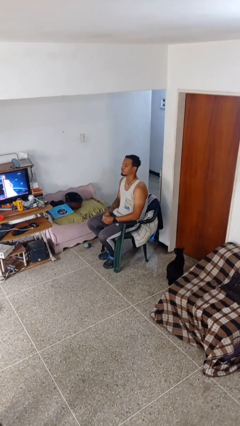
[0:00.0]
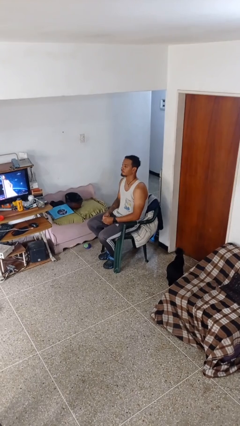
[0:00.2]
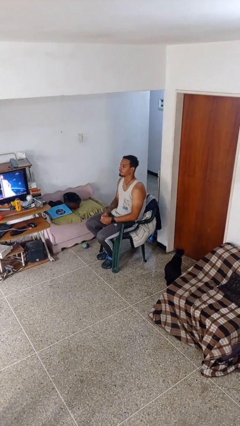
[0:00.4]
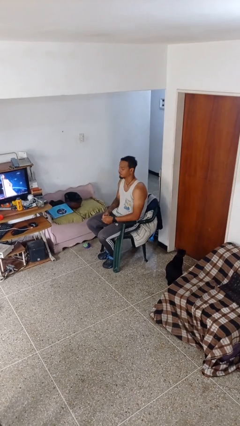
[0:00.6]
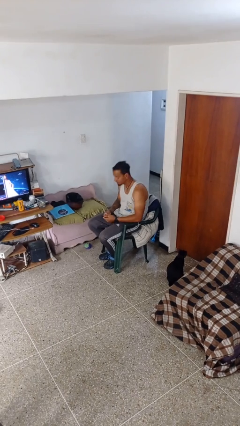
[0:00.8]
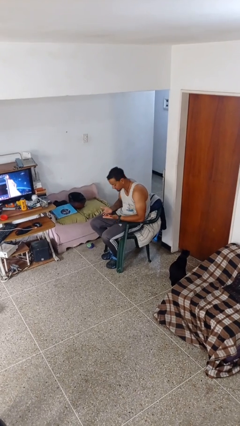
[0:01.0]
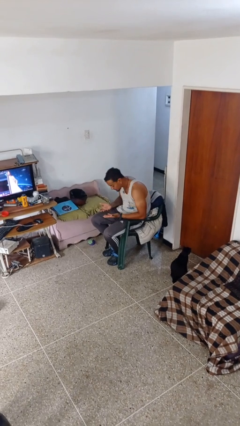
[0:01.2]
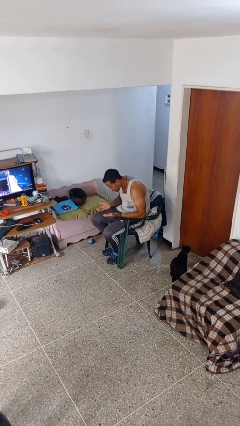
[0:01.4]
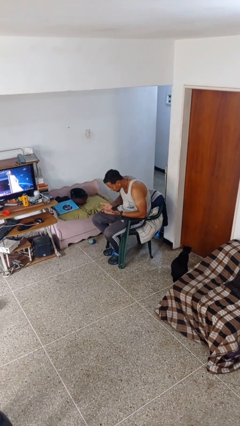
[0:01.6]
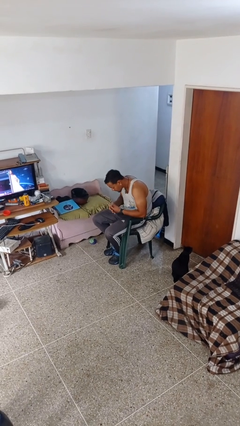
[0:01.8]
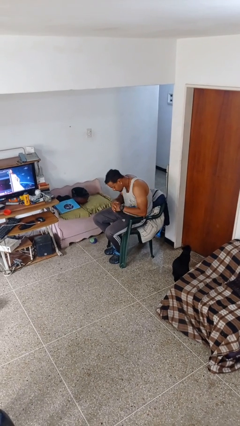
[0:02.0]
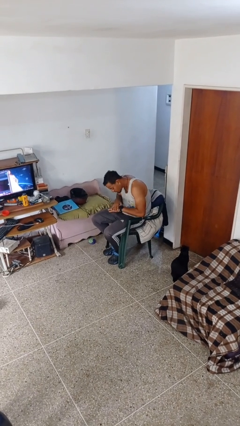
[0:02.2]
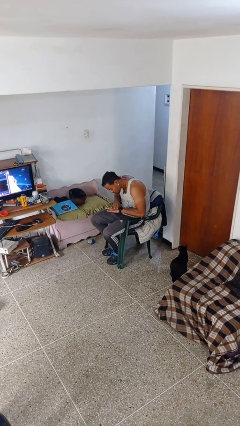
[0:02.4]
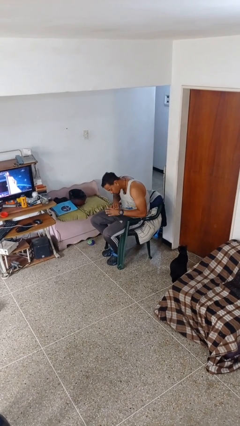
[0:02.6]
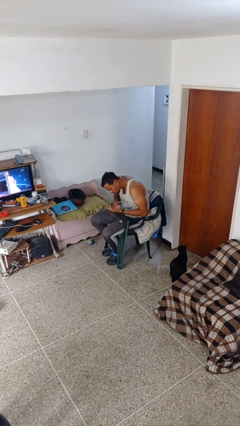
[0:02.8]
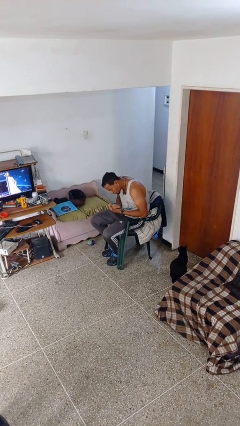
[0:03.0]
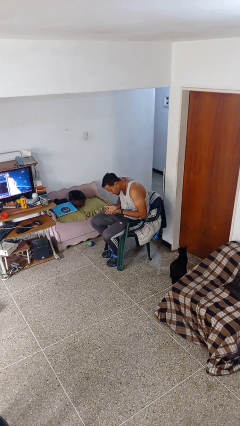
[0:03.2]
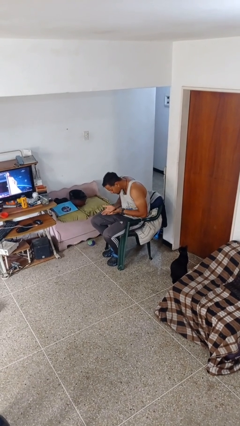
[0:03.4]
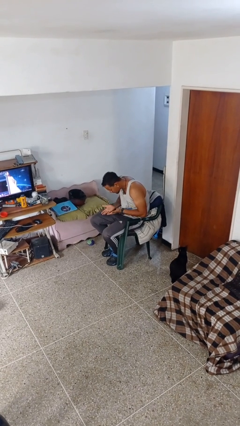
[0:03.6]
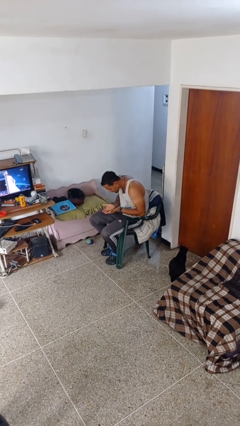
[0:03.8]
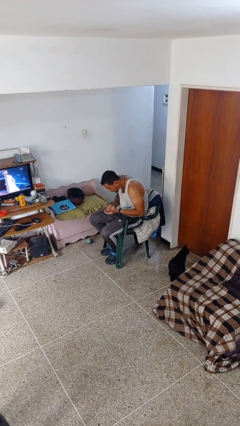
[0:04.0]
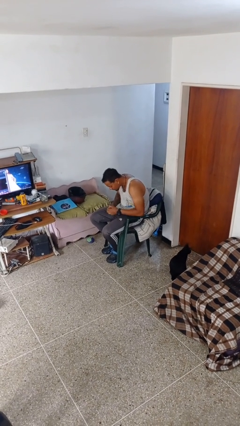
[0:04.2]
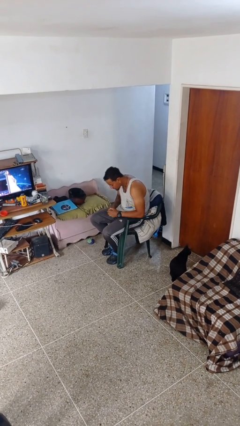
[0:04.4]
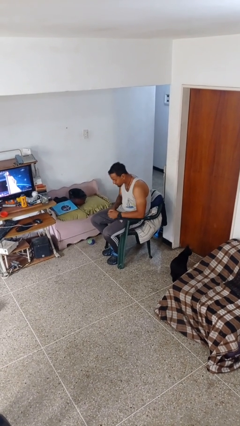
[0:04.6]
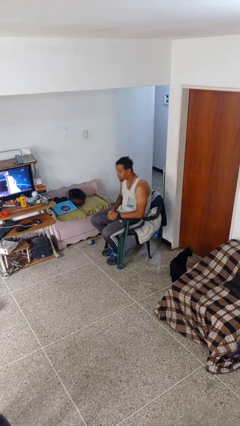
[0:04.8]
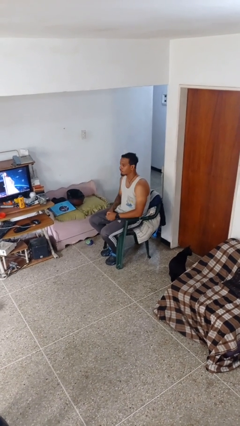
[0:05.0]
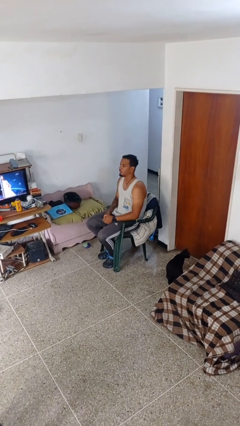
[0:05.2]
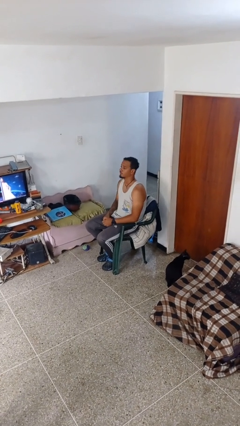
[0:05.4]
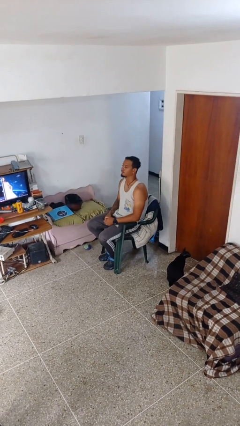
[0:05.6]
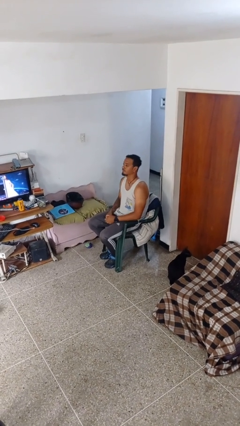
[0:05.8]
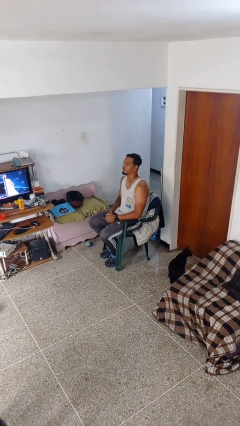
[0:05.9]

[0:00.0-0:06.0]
person looks at hands in lap

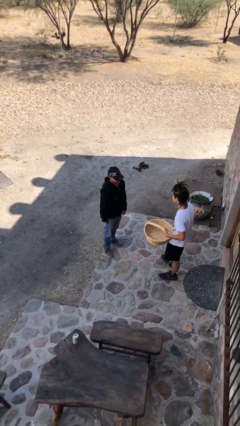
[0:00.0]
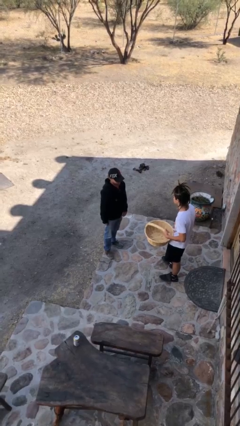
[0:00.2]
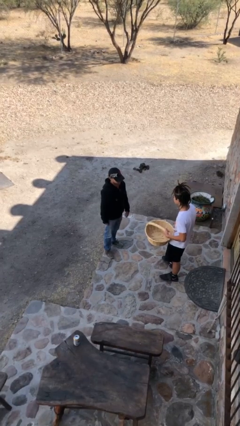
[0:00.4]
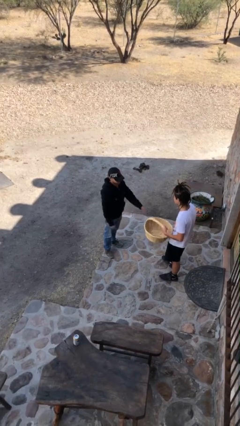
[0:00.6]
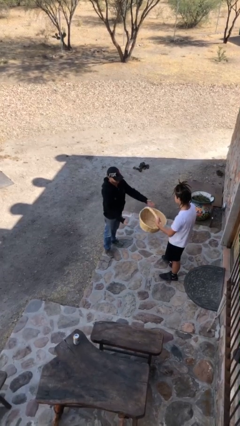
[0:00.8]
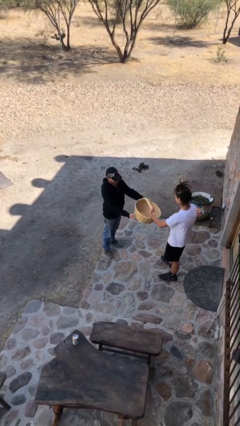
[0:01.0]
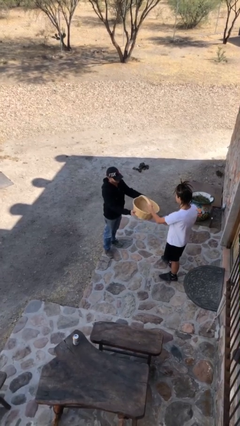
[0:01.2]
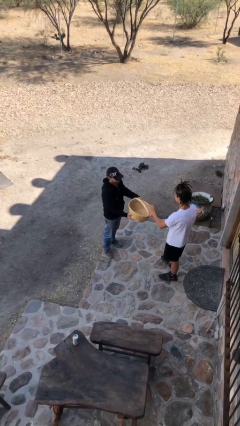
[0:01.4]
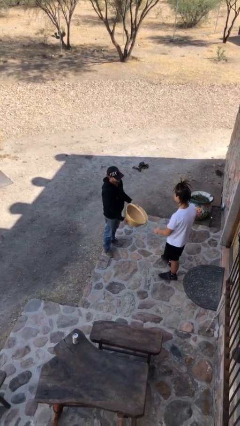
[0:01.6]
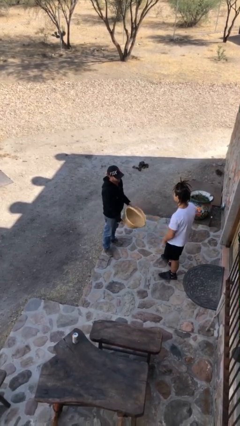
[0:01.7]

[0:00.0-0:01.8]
person transfers object to person

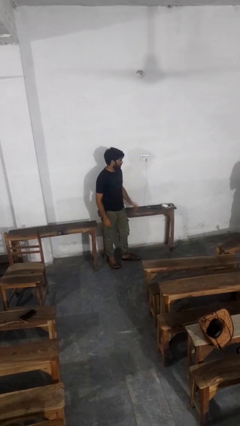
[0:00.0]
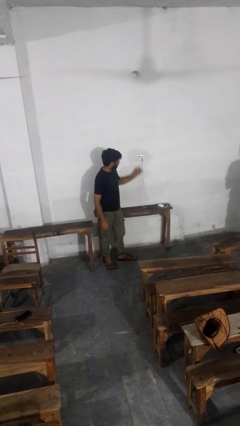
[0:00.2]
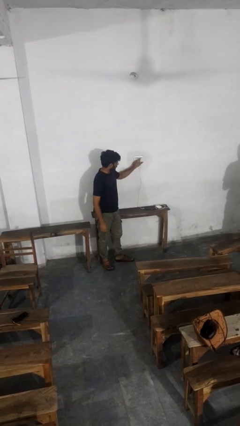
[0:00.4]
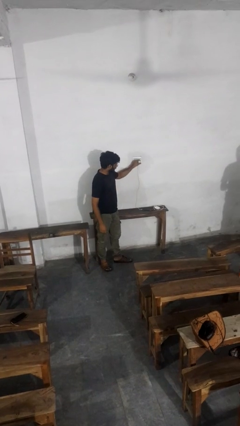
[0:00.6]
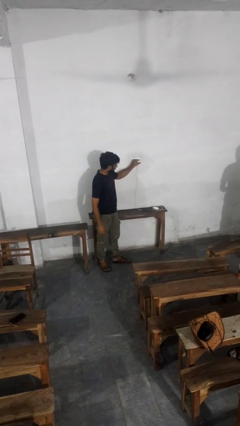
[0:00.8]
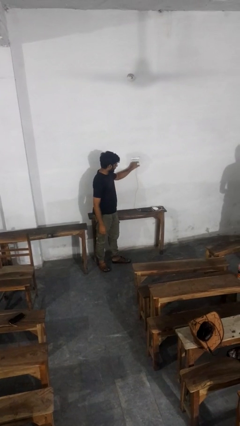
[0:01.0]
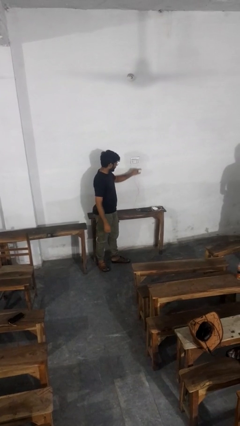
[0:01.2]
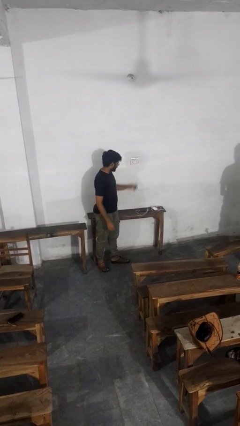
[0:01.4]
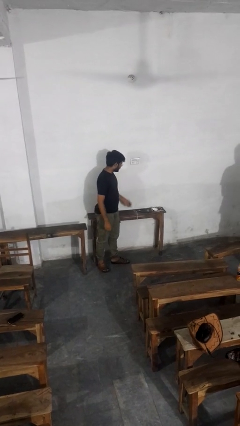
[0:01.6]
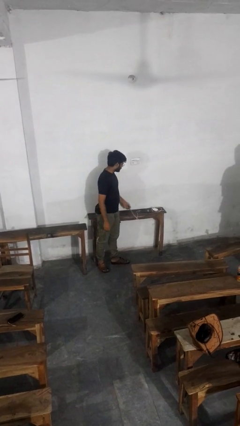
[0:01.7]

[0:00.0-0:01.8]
person unplugs from electrical socket

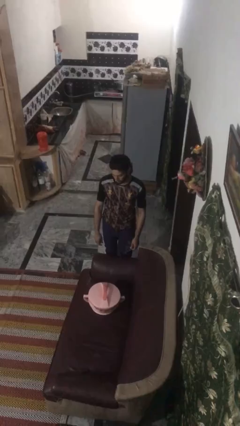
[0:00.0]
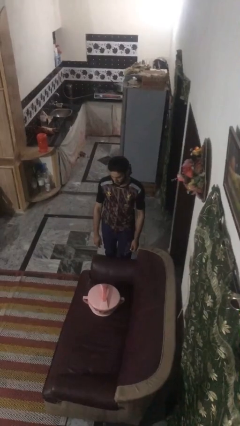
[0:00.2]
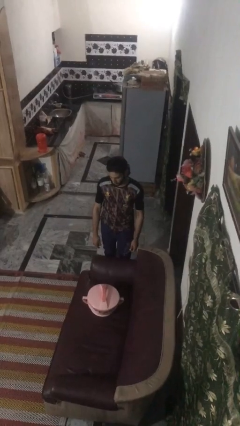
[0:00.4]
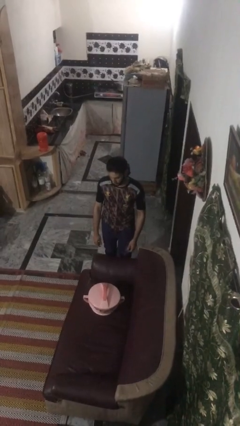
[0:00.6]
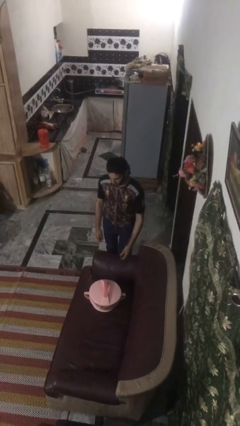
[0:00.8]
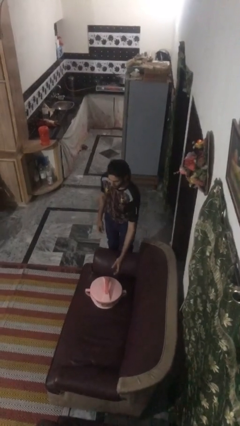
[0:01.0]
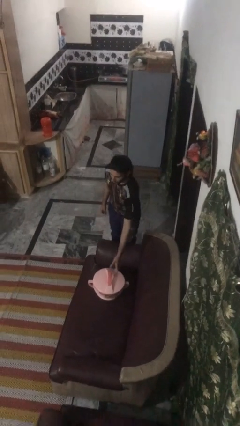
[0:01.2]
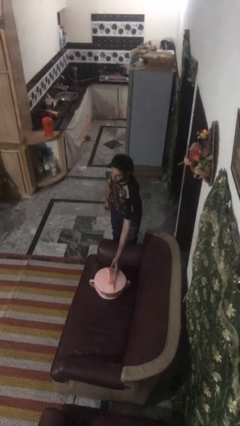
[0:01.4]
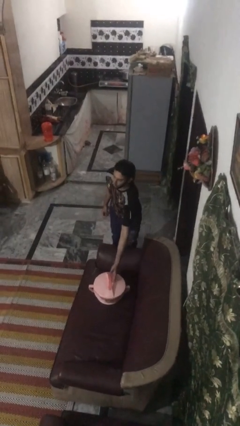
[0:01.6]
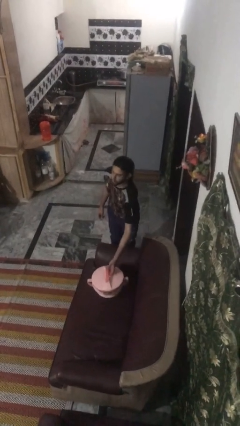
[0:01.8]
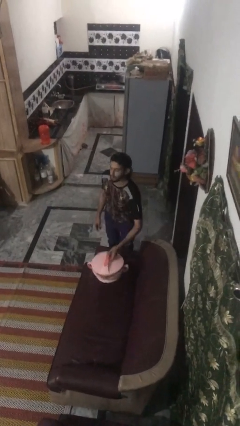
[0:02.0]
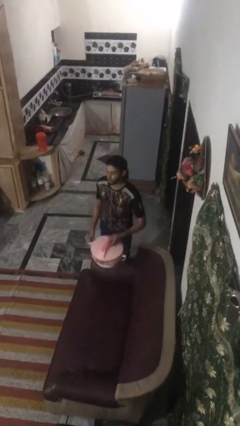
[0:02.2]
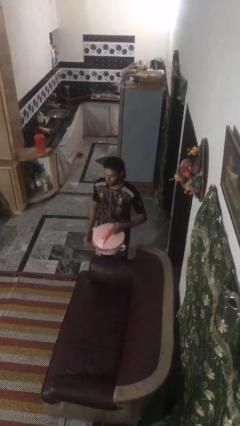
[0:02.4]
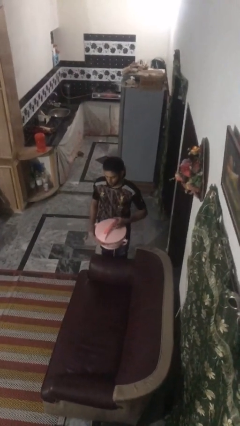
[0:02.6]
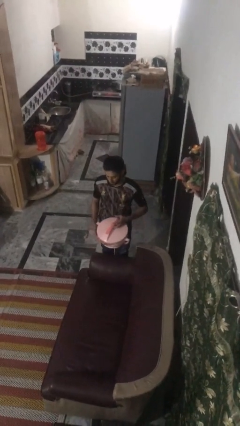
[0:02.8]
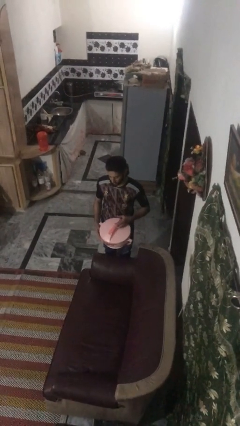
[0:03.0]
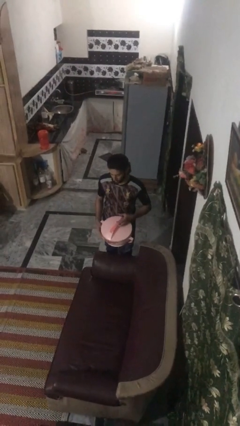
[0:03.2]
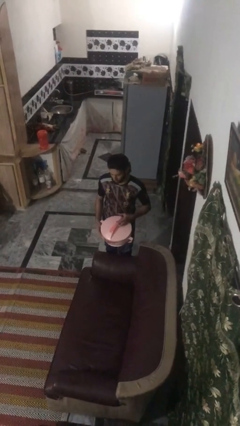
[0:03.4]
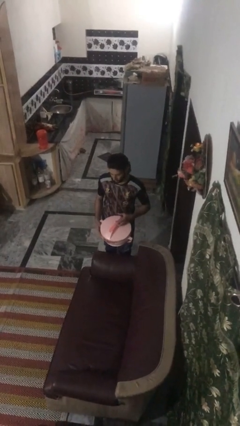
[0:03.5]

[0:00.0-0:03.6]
person picks up object from couch

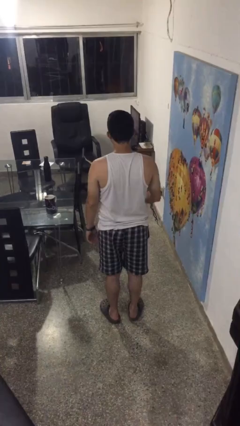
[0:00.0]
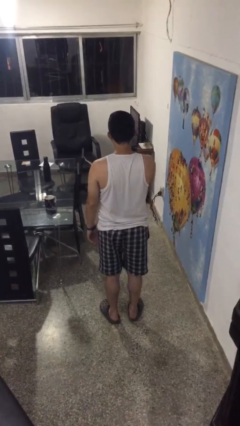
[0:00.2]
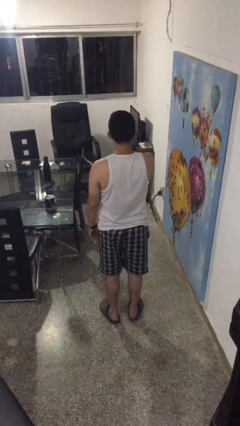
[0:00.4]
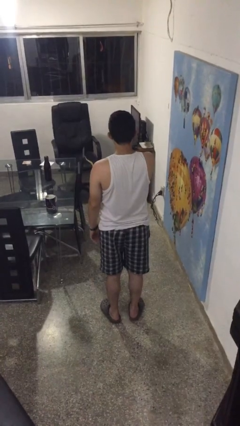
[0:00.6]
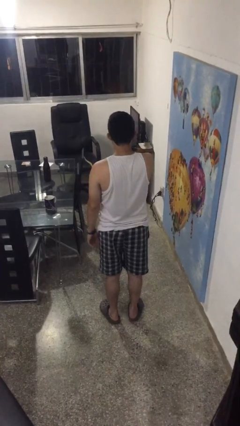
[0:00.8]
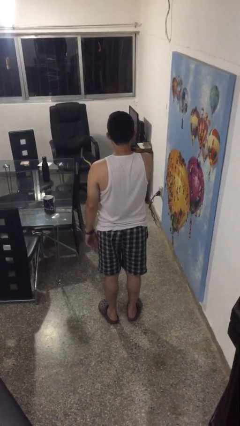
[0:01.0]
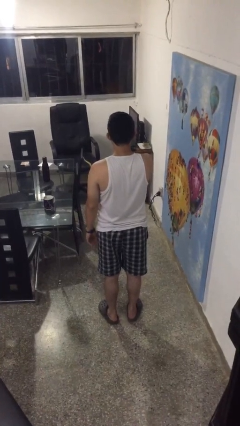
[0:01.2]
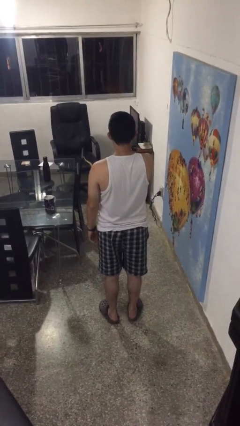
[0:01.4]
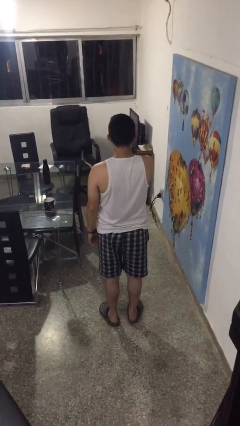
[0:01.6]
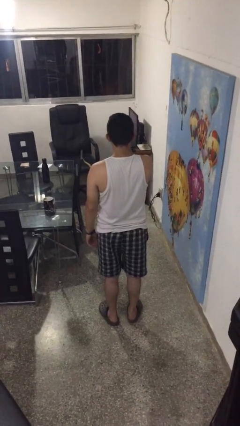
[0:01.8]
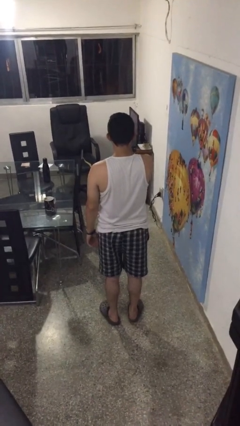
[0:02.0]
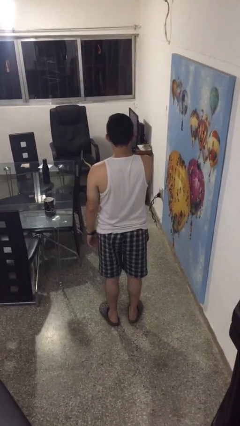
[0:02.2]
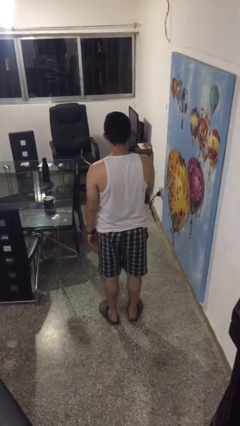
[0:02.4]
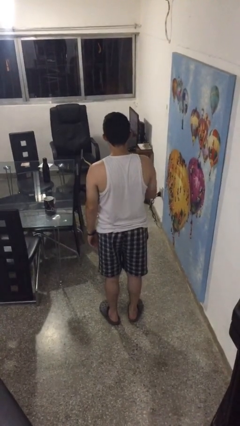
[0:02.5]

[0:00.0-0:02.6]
person scratches face

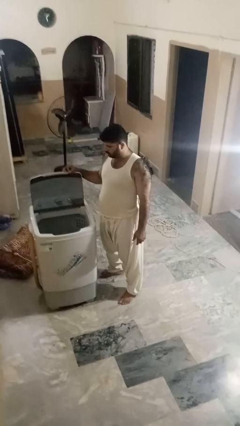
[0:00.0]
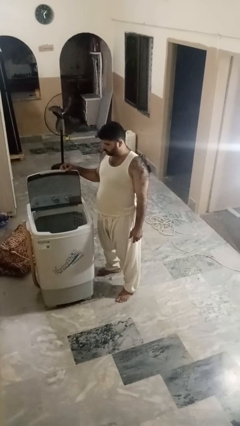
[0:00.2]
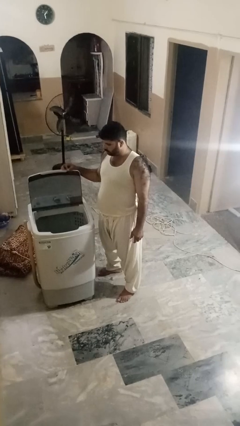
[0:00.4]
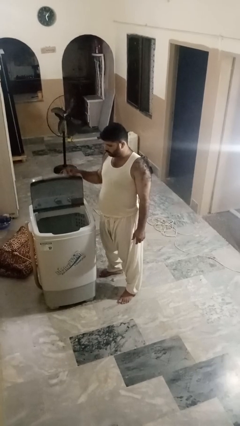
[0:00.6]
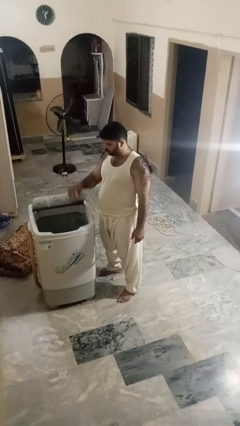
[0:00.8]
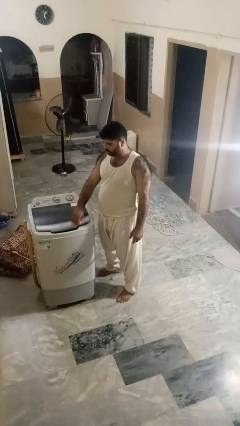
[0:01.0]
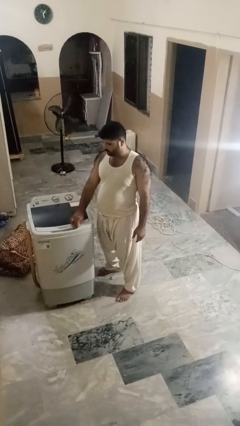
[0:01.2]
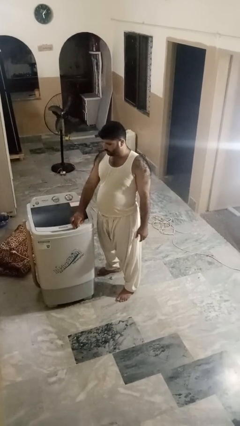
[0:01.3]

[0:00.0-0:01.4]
person closes clothes washer
